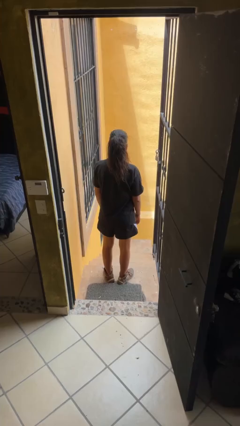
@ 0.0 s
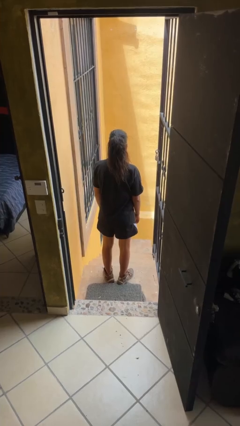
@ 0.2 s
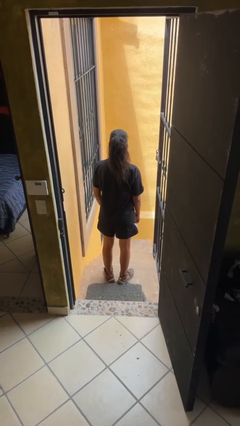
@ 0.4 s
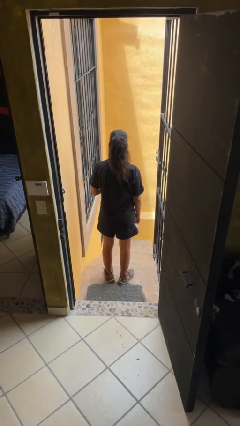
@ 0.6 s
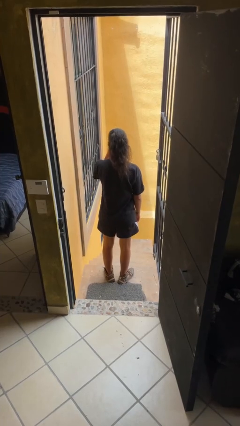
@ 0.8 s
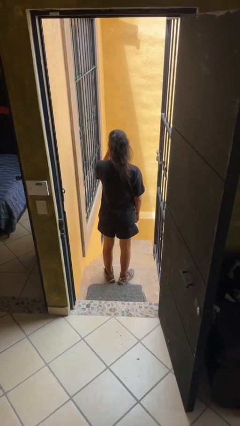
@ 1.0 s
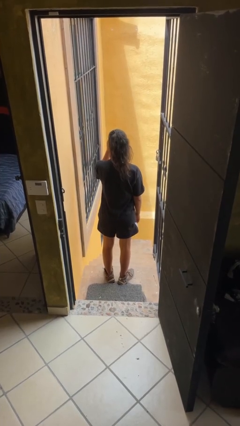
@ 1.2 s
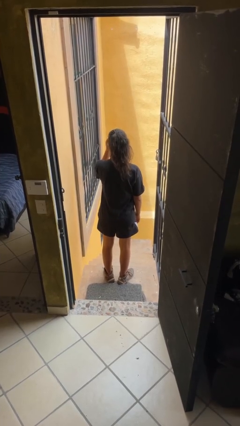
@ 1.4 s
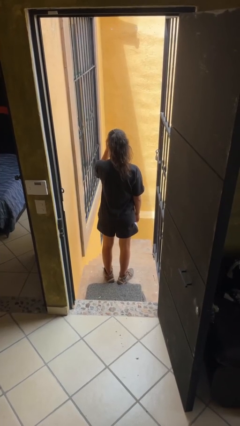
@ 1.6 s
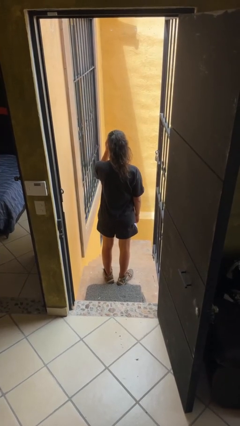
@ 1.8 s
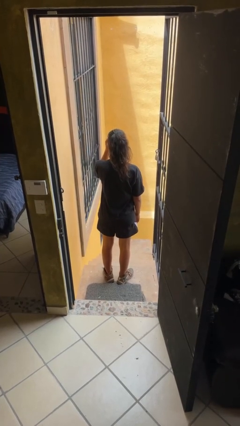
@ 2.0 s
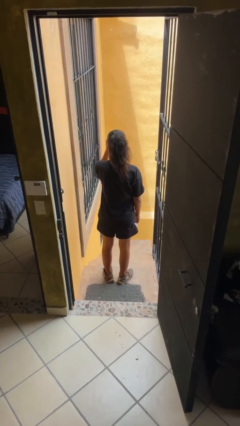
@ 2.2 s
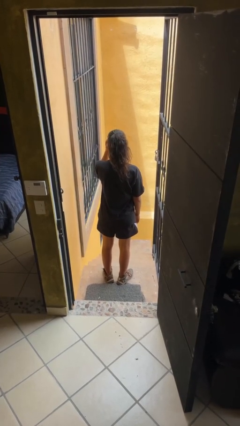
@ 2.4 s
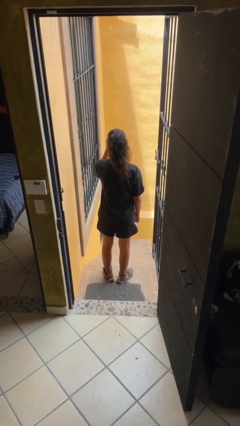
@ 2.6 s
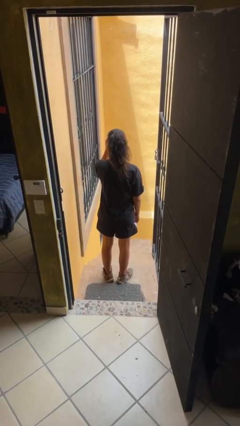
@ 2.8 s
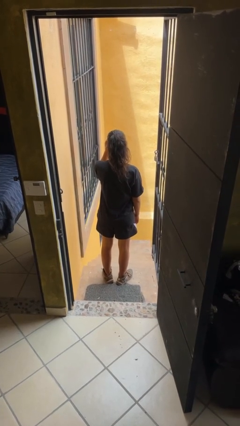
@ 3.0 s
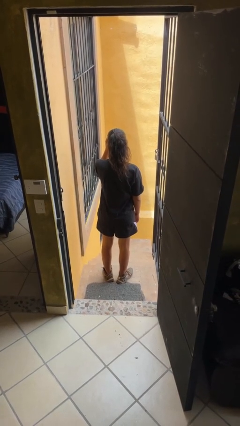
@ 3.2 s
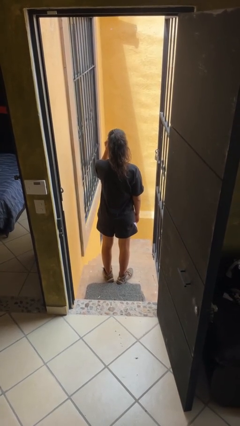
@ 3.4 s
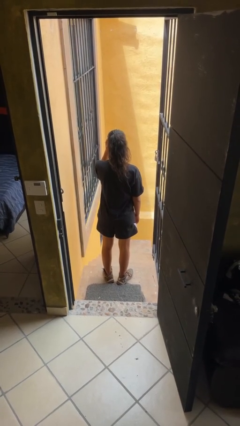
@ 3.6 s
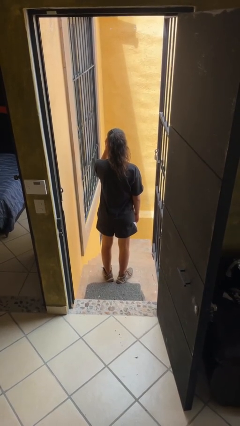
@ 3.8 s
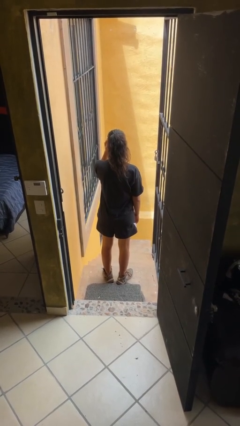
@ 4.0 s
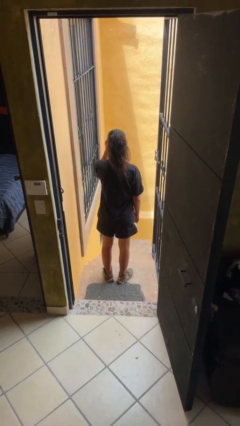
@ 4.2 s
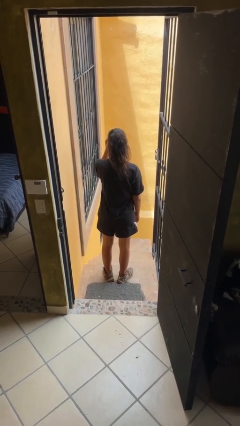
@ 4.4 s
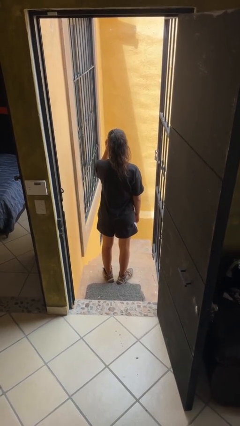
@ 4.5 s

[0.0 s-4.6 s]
person scratches face

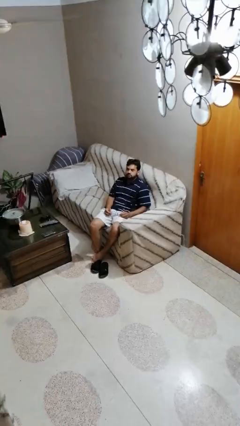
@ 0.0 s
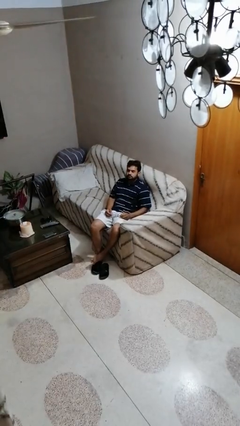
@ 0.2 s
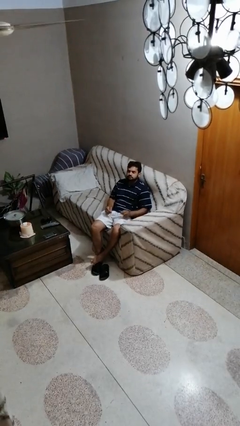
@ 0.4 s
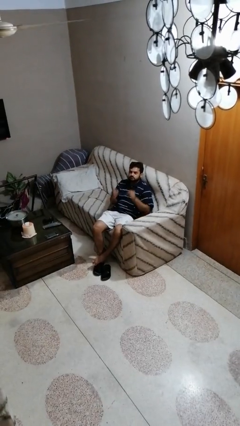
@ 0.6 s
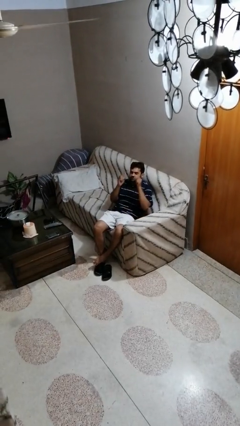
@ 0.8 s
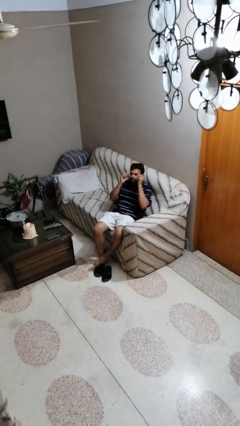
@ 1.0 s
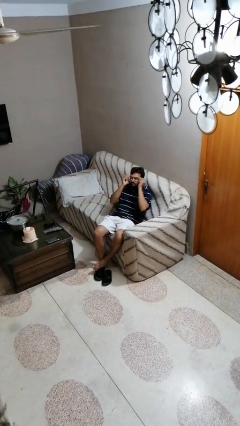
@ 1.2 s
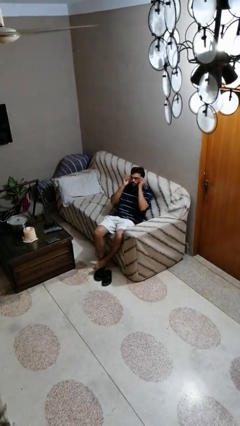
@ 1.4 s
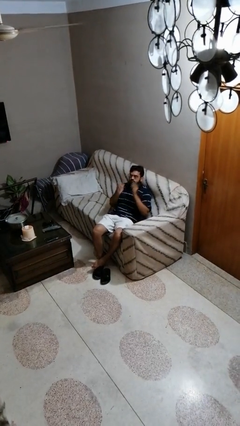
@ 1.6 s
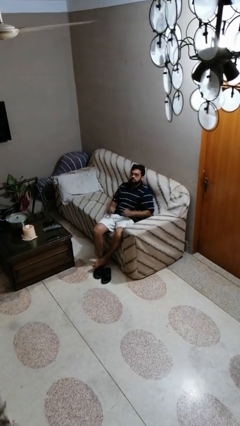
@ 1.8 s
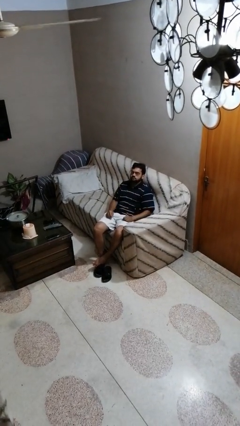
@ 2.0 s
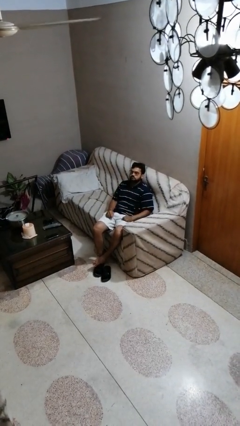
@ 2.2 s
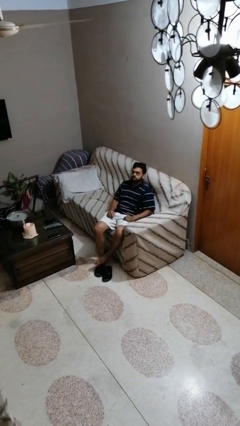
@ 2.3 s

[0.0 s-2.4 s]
person puts on glasses

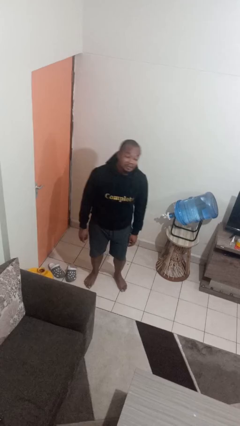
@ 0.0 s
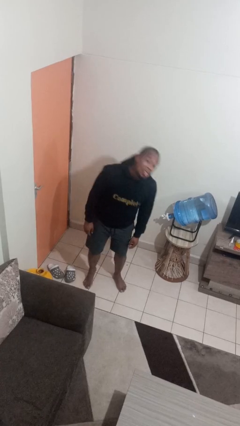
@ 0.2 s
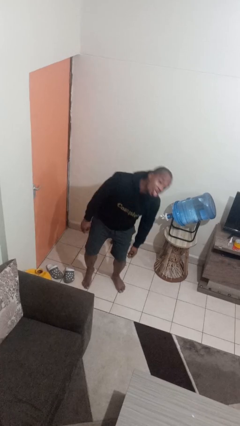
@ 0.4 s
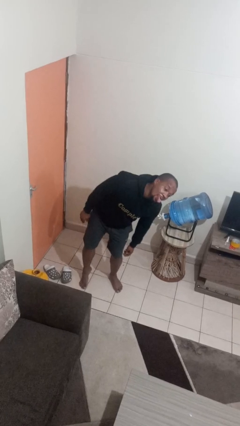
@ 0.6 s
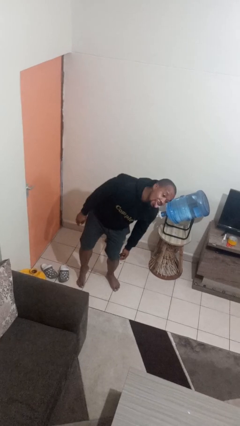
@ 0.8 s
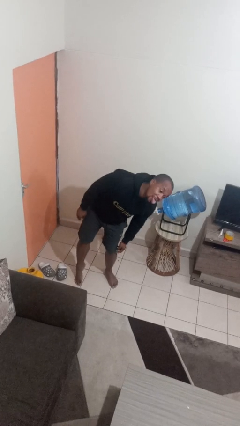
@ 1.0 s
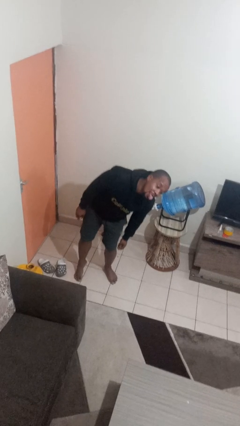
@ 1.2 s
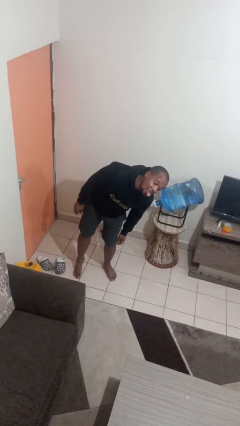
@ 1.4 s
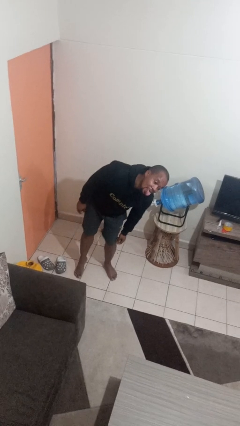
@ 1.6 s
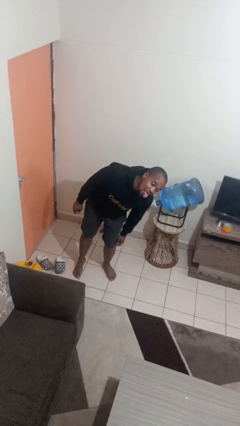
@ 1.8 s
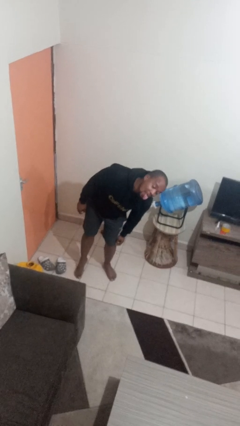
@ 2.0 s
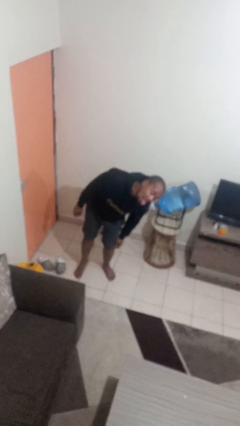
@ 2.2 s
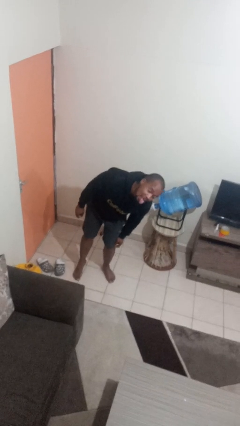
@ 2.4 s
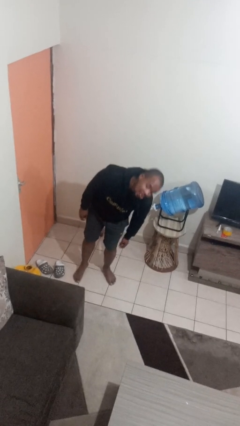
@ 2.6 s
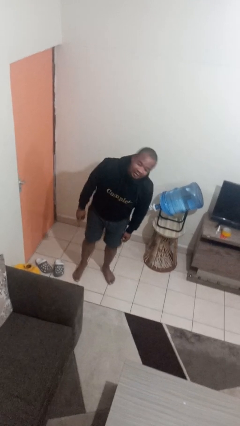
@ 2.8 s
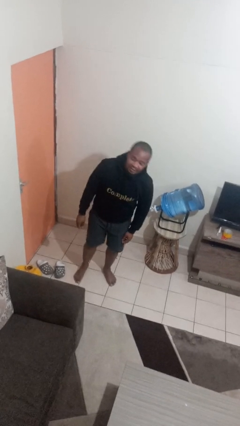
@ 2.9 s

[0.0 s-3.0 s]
person sticks out tongue

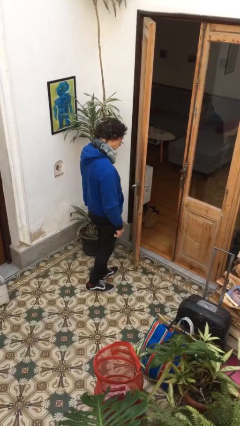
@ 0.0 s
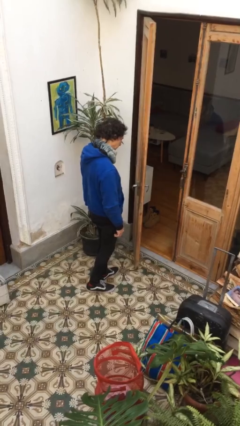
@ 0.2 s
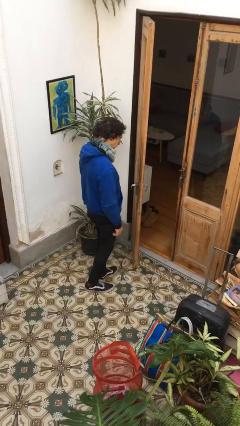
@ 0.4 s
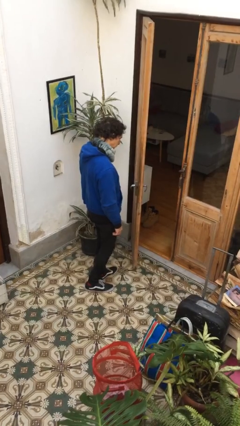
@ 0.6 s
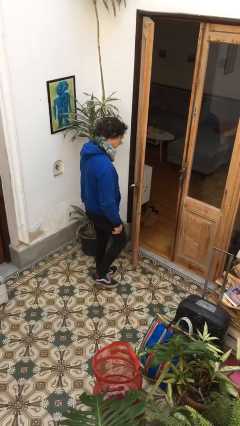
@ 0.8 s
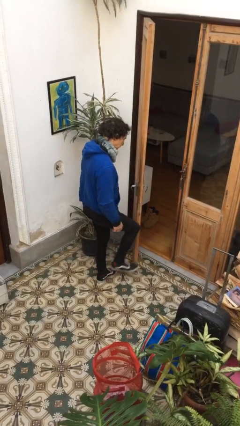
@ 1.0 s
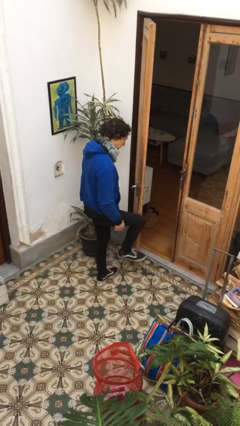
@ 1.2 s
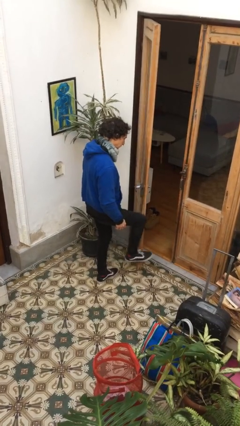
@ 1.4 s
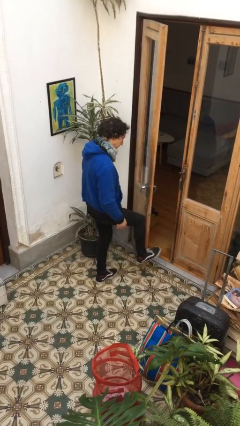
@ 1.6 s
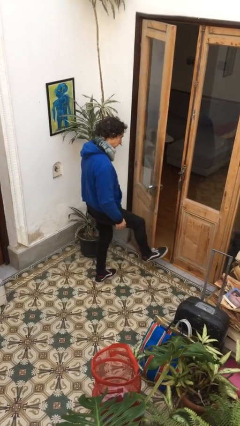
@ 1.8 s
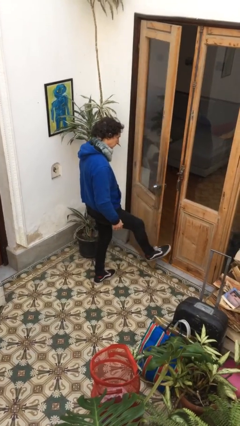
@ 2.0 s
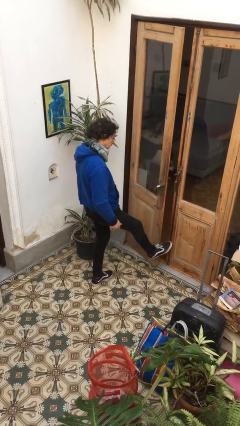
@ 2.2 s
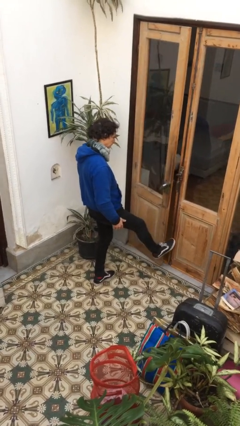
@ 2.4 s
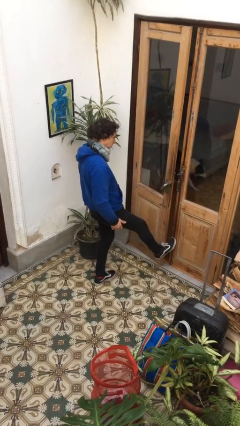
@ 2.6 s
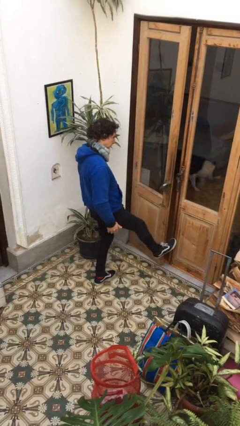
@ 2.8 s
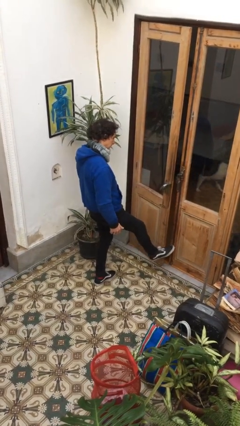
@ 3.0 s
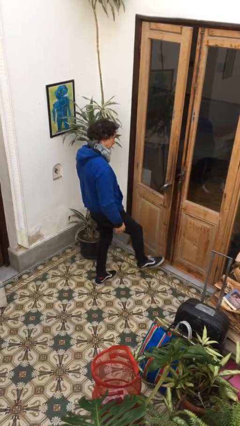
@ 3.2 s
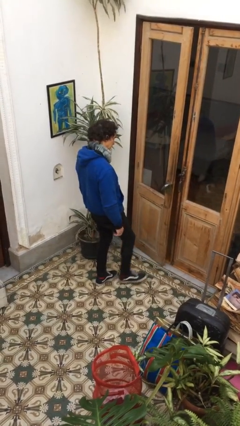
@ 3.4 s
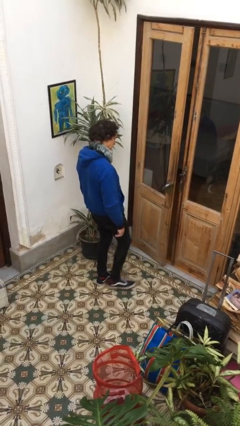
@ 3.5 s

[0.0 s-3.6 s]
person closes door with foot

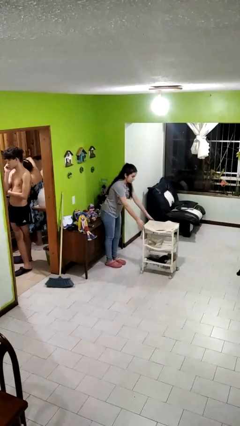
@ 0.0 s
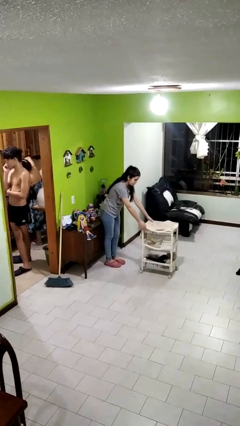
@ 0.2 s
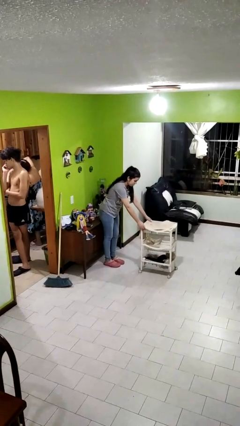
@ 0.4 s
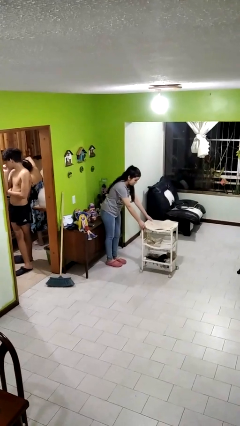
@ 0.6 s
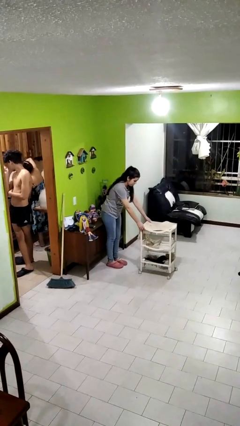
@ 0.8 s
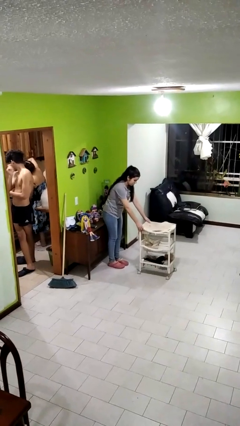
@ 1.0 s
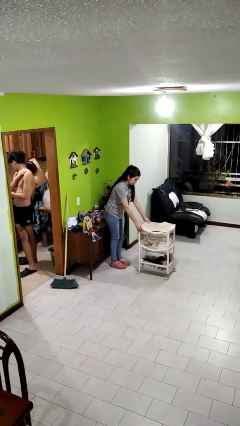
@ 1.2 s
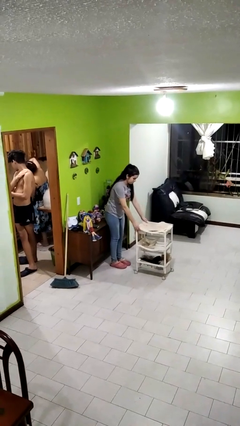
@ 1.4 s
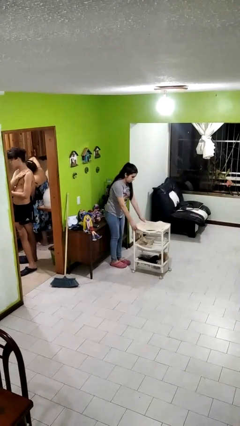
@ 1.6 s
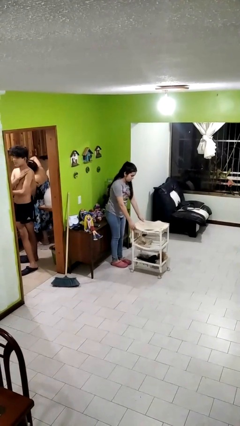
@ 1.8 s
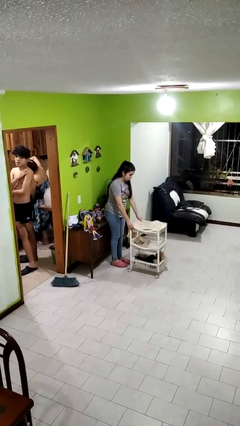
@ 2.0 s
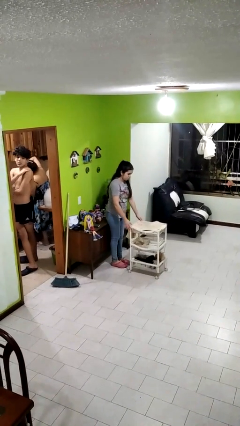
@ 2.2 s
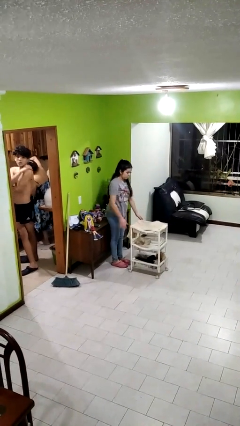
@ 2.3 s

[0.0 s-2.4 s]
person pulls wheeled cart

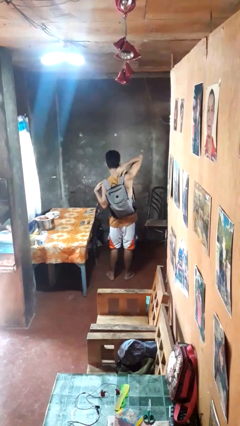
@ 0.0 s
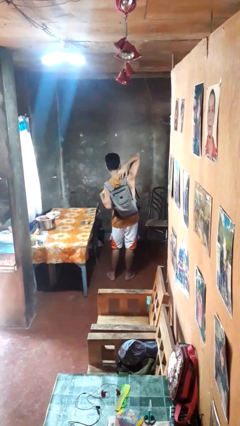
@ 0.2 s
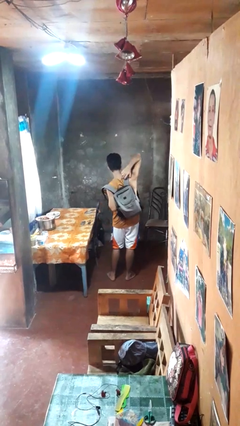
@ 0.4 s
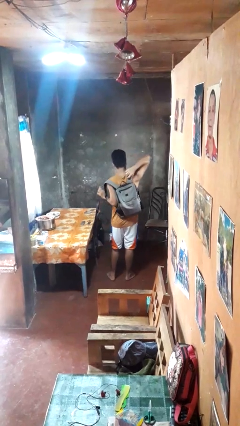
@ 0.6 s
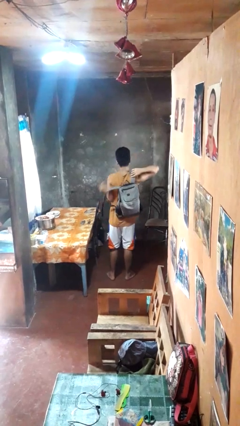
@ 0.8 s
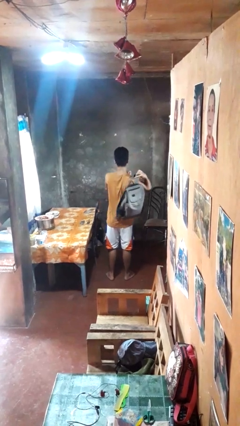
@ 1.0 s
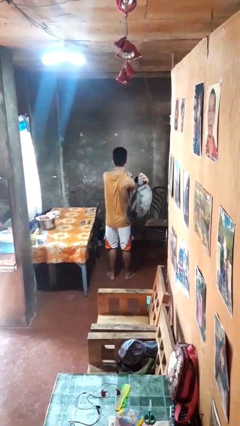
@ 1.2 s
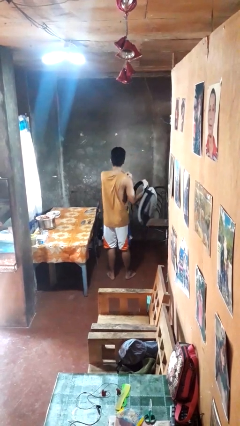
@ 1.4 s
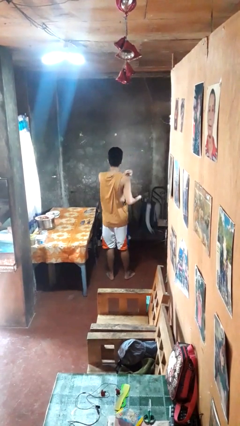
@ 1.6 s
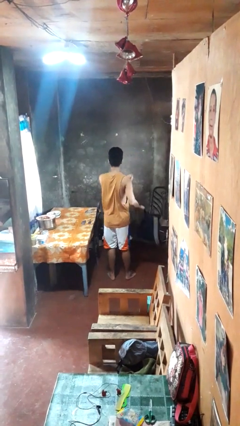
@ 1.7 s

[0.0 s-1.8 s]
person takes off backpack
